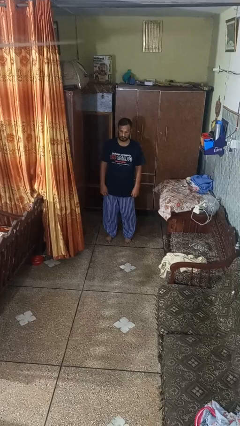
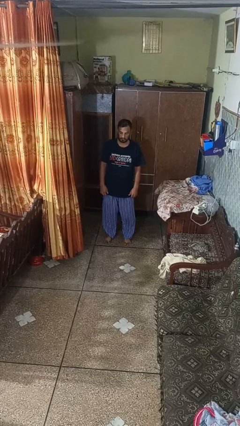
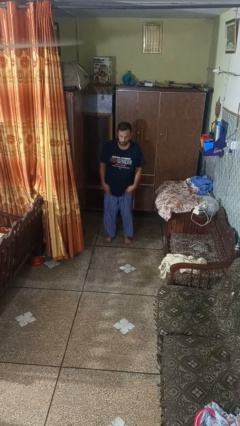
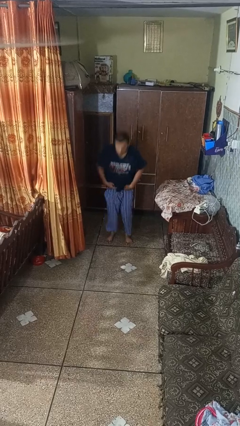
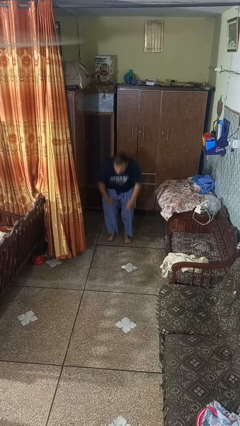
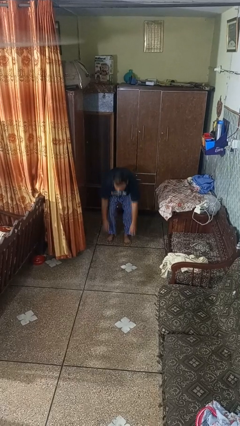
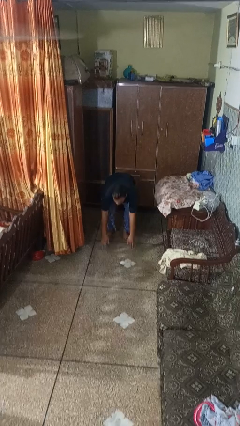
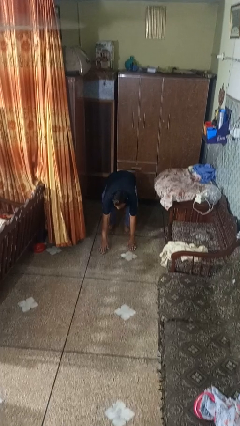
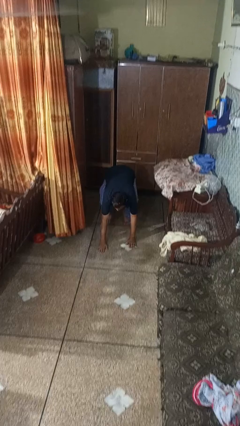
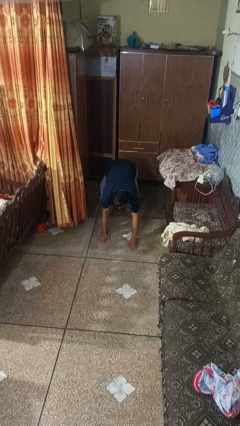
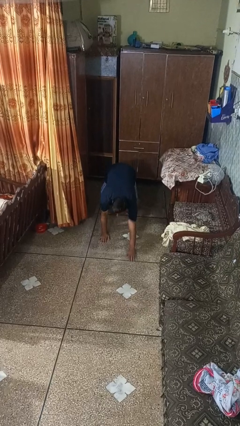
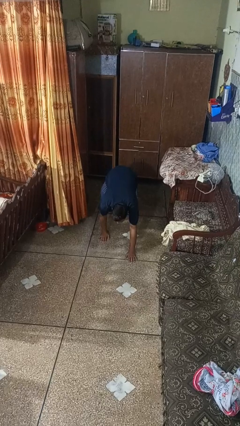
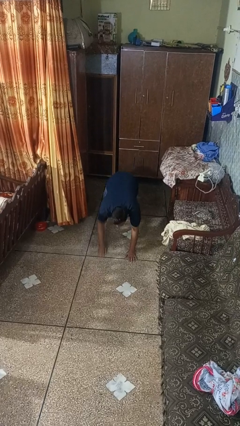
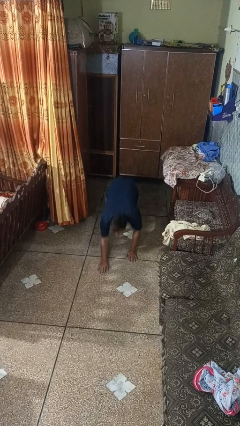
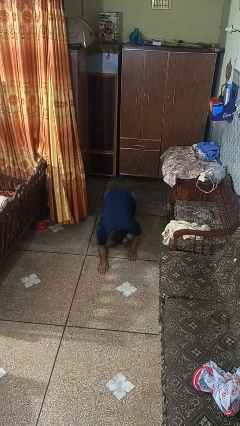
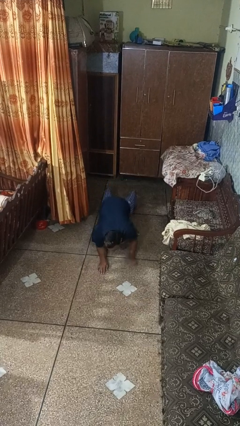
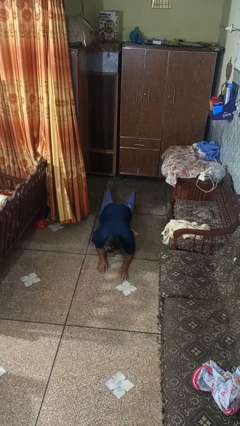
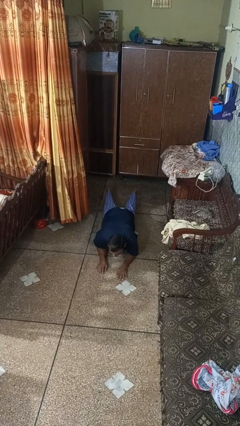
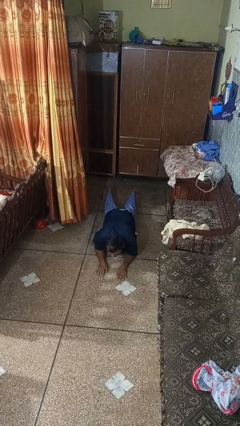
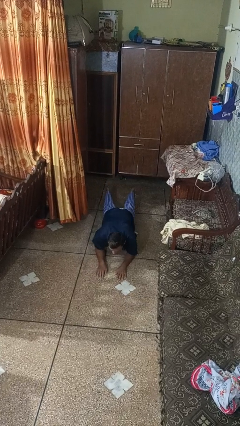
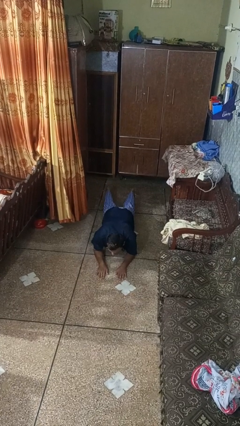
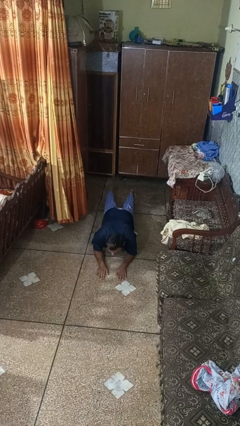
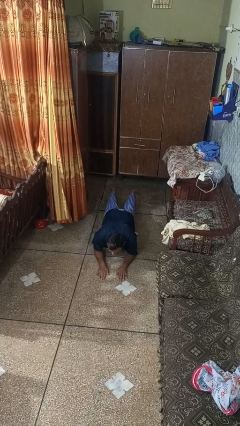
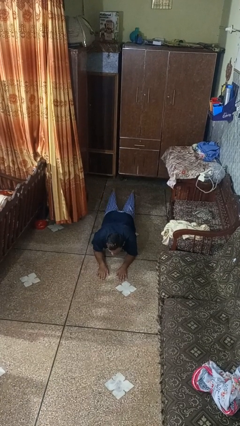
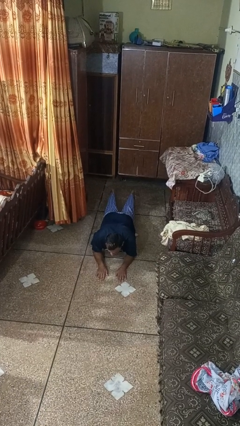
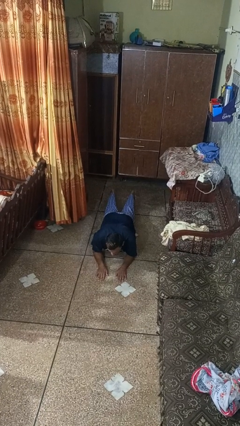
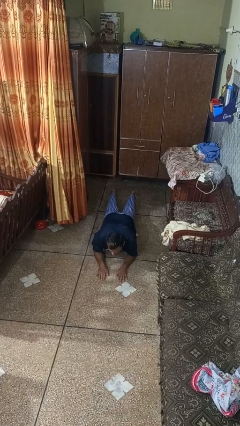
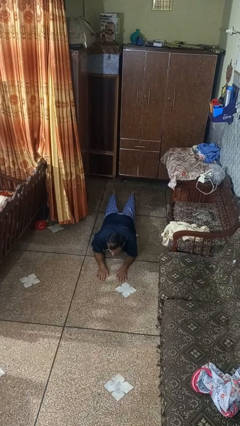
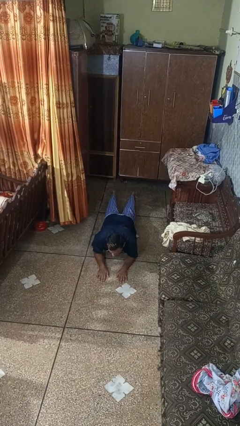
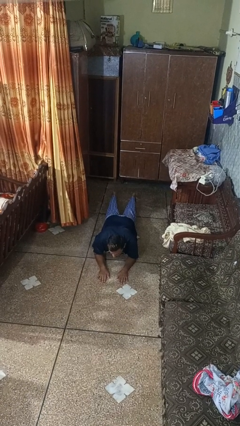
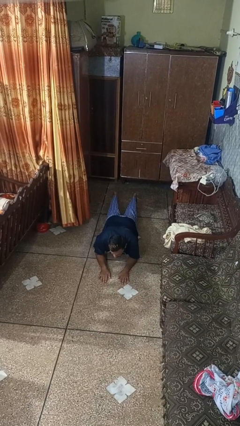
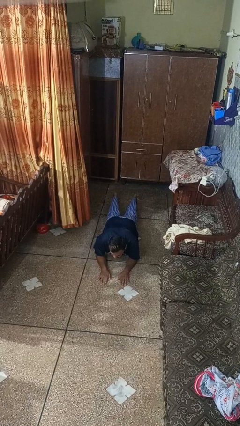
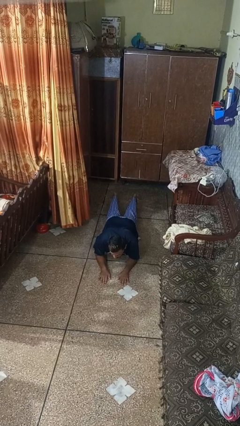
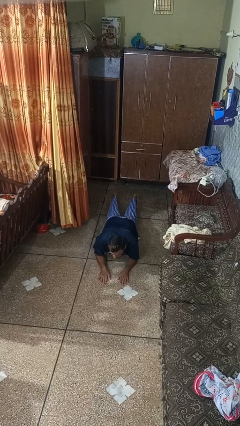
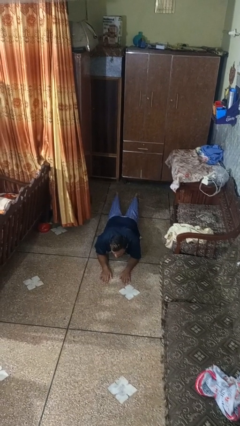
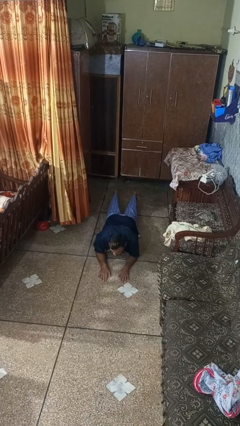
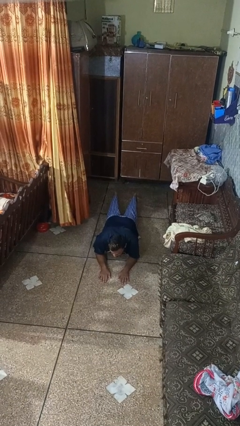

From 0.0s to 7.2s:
person exercises with plank

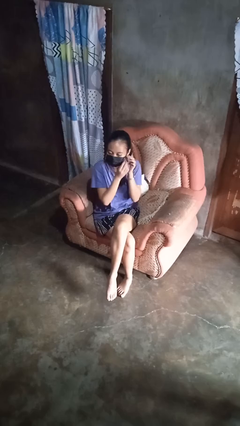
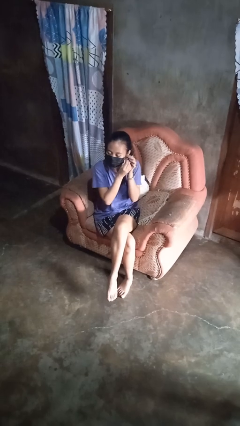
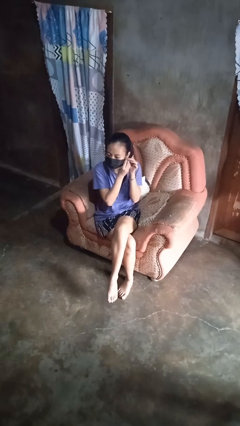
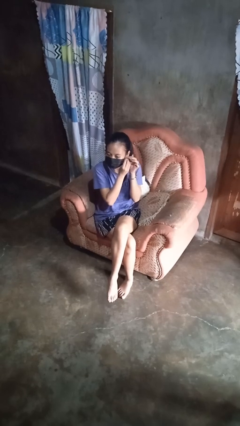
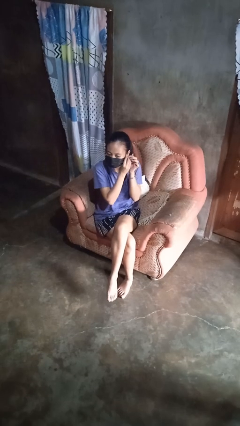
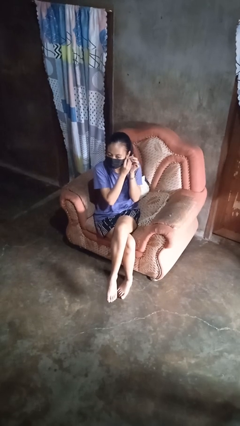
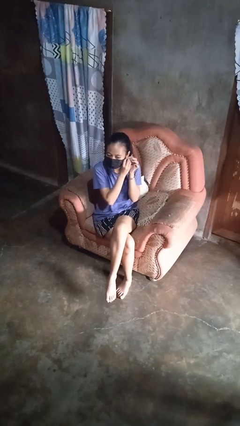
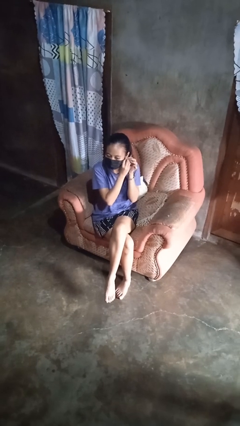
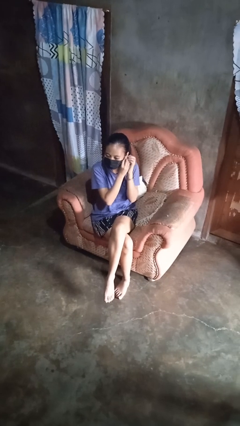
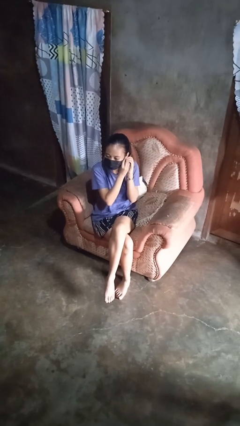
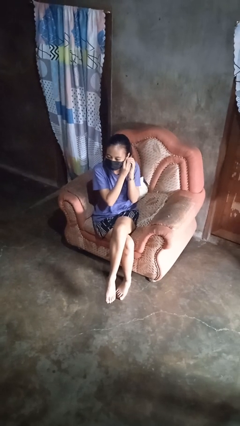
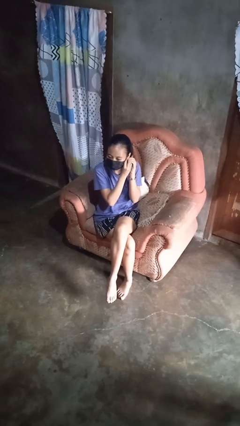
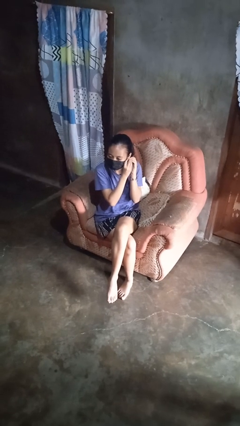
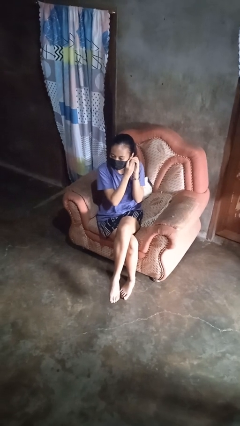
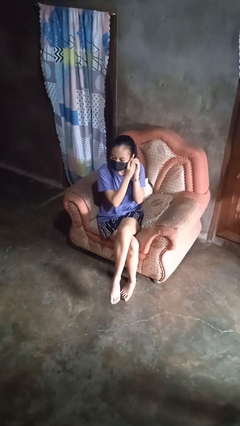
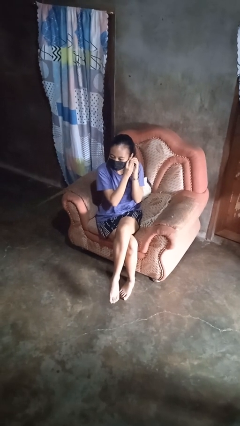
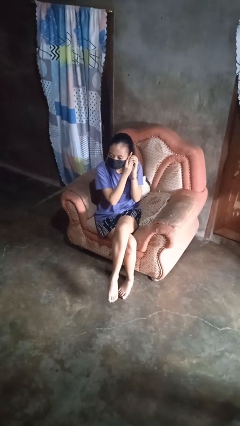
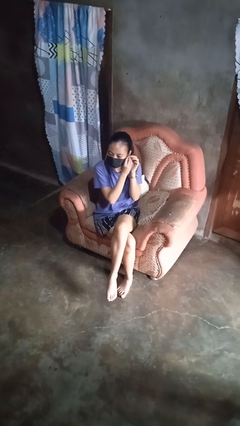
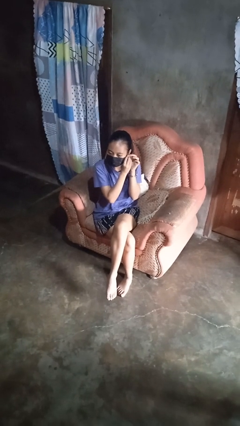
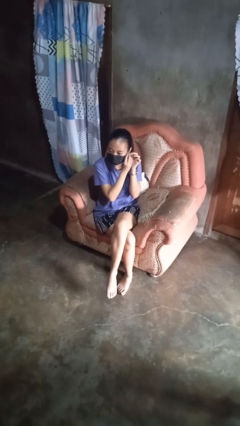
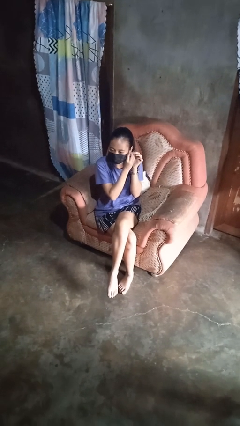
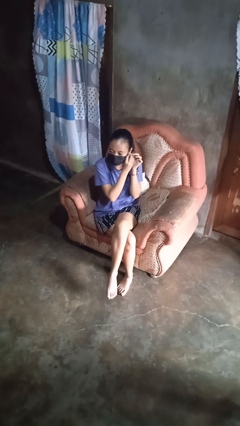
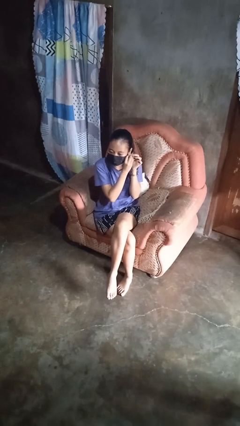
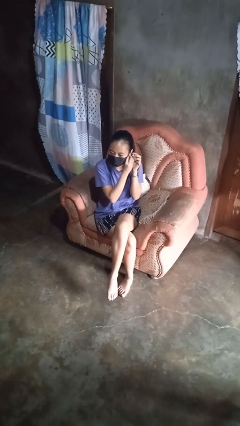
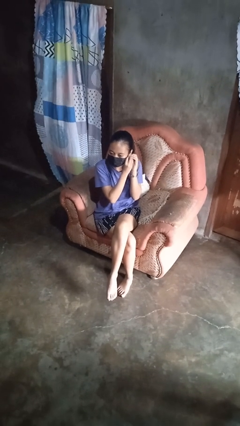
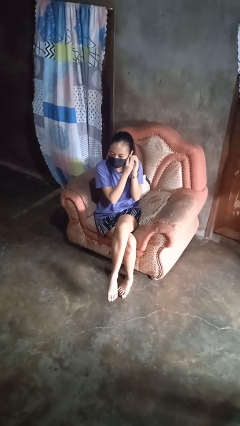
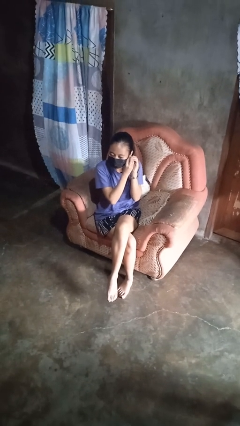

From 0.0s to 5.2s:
person puts on earrings

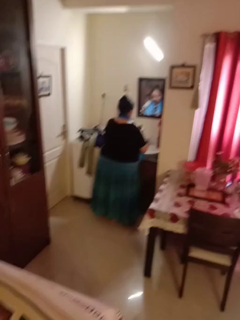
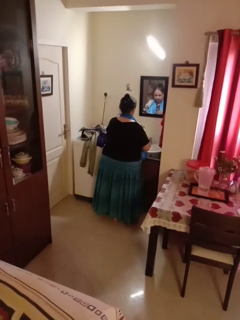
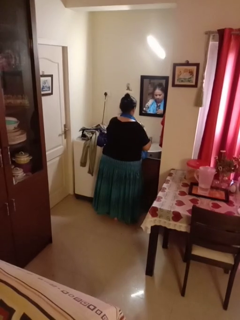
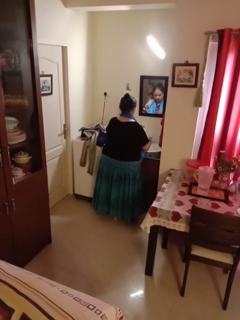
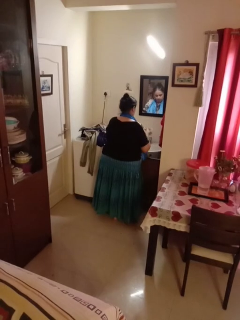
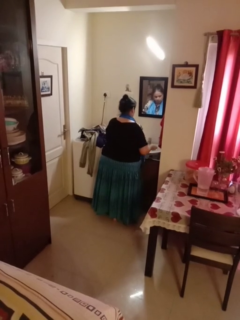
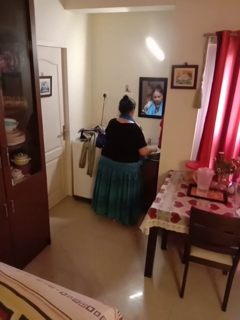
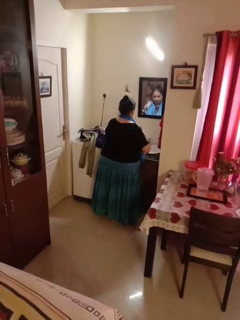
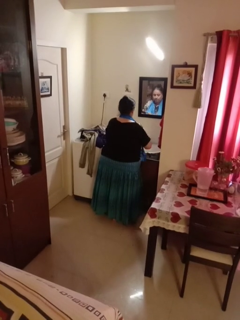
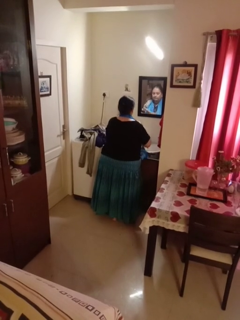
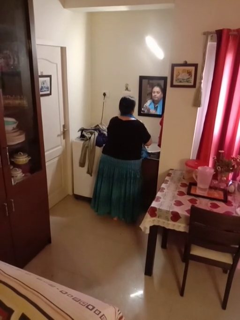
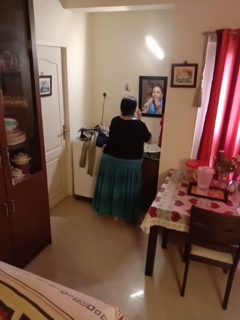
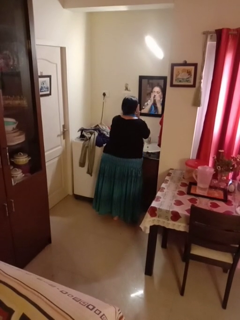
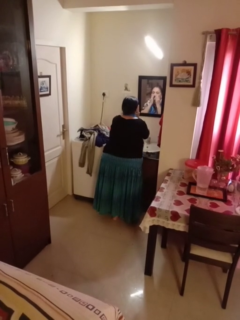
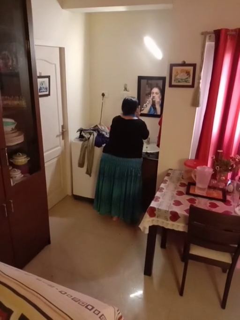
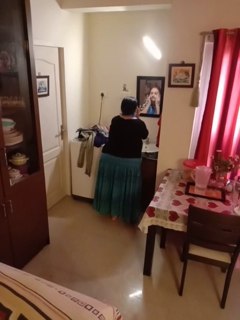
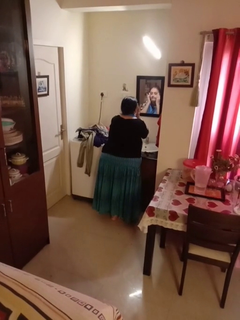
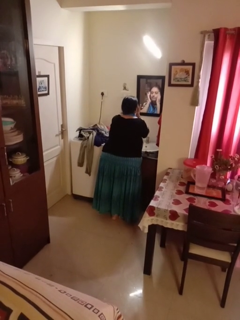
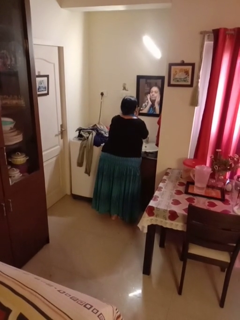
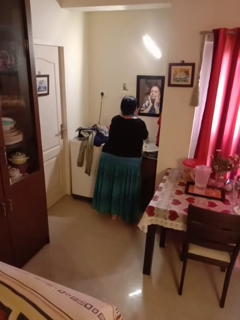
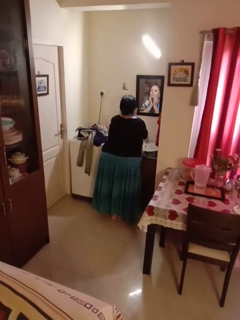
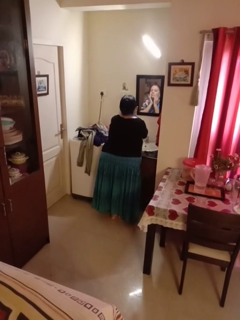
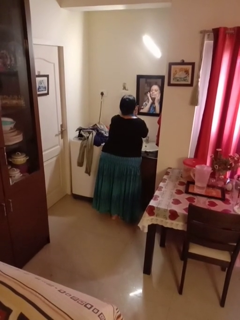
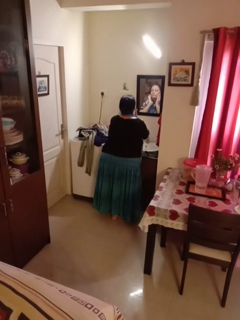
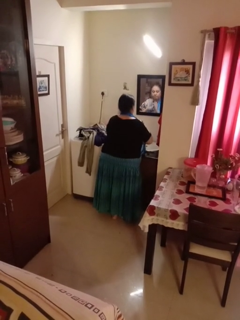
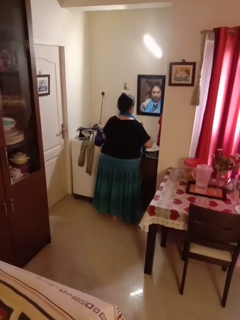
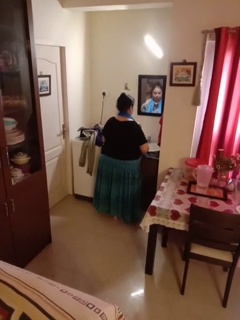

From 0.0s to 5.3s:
person applies foundation makeup

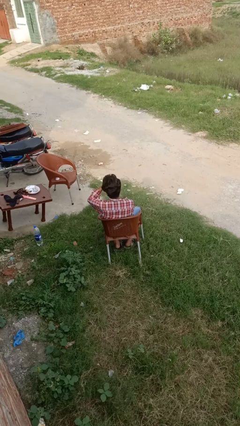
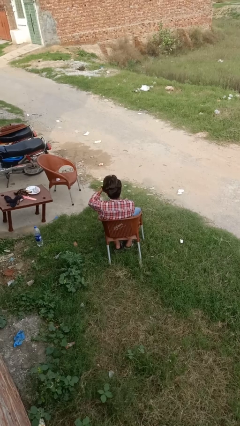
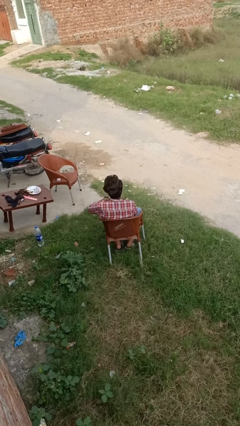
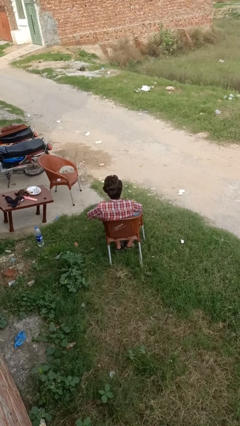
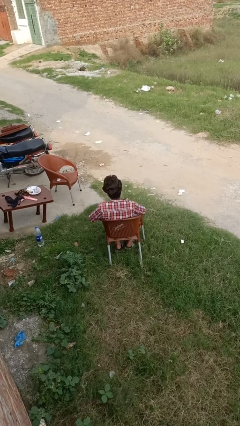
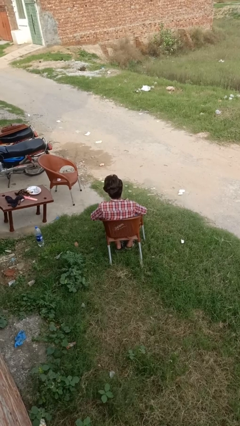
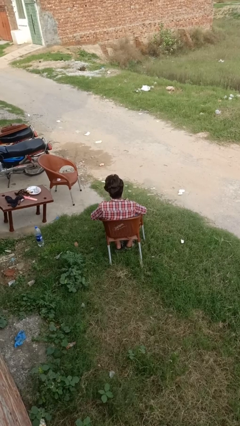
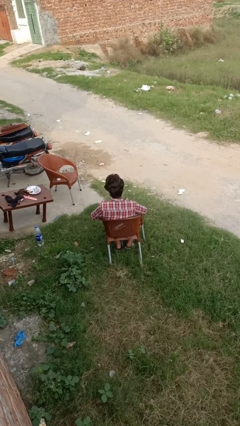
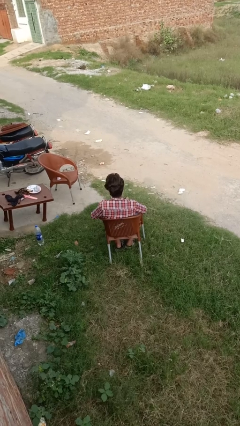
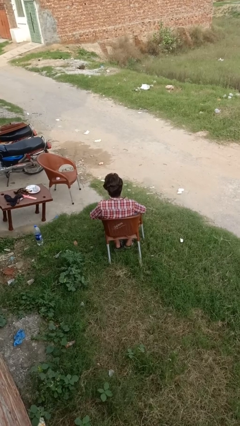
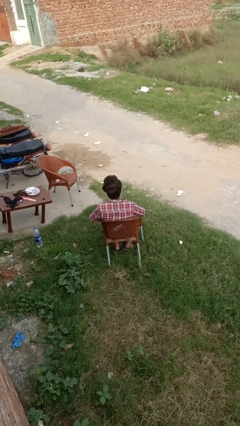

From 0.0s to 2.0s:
person takes off wristwatch
